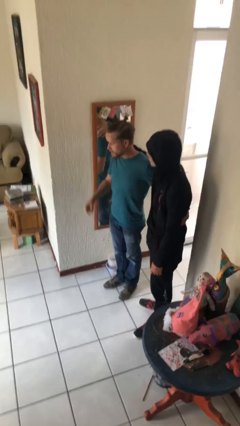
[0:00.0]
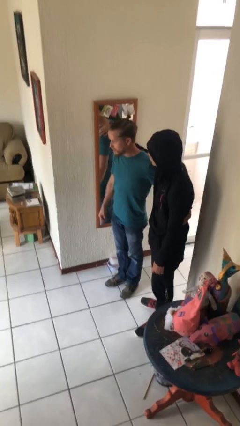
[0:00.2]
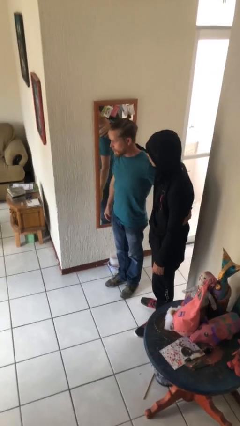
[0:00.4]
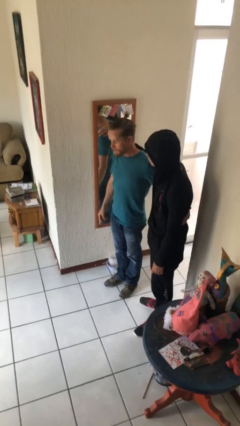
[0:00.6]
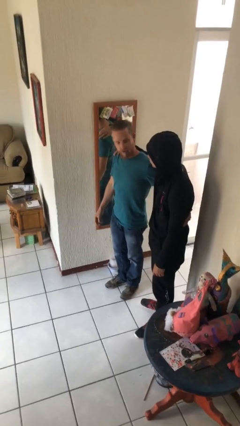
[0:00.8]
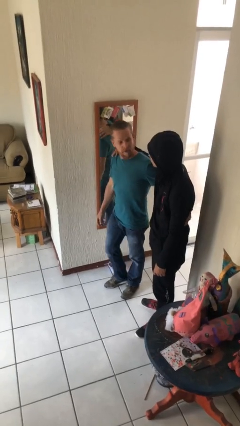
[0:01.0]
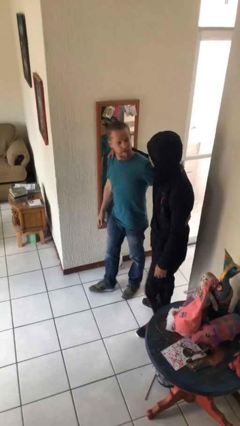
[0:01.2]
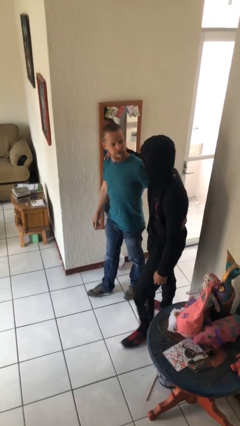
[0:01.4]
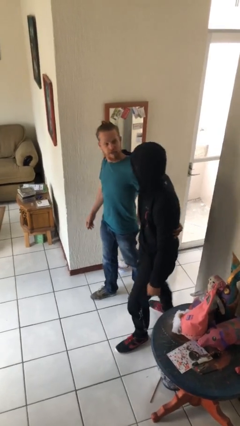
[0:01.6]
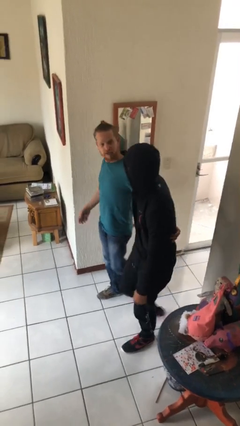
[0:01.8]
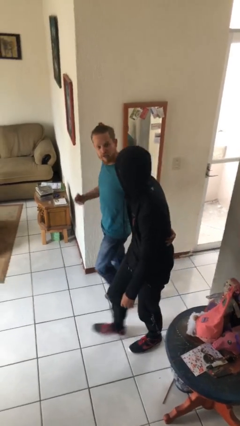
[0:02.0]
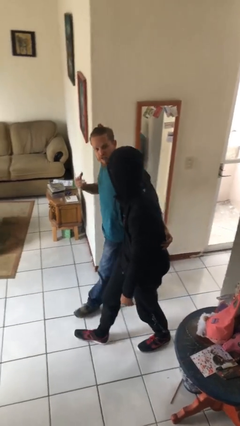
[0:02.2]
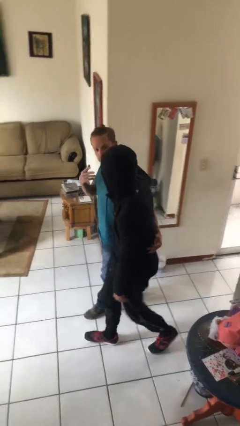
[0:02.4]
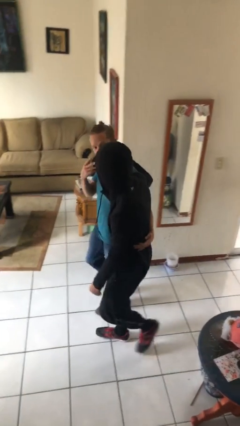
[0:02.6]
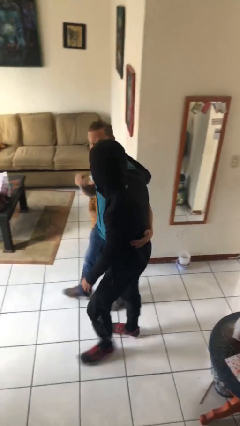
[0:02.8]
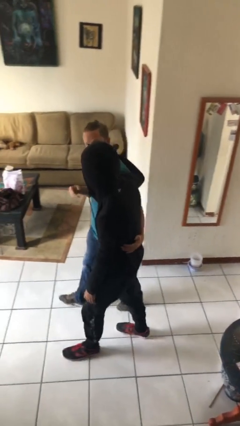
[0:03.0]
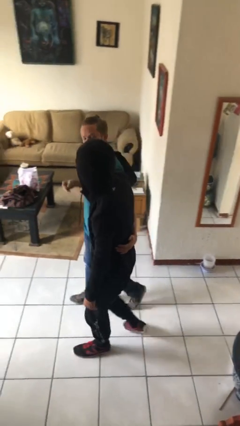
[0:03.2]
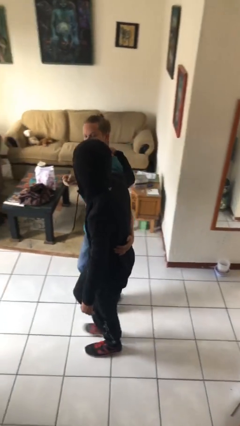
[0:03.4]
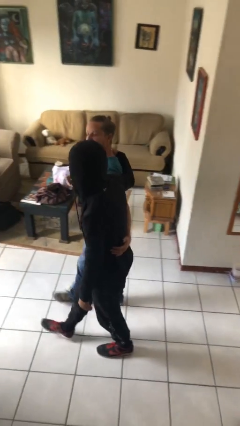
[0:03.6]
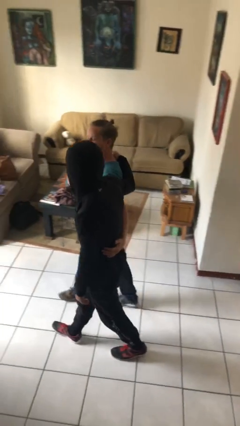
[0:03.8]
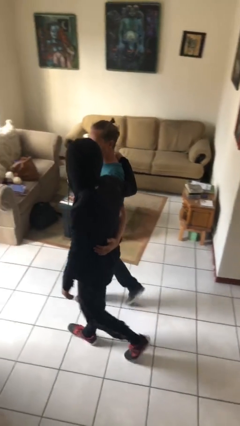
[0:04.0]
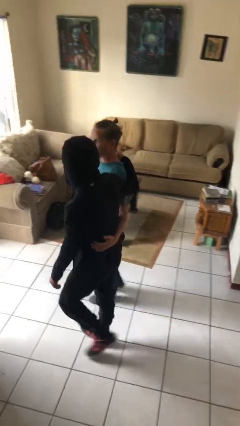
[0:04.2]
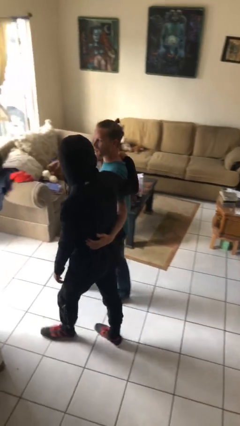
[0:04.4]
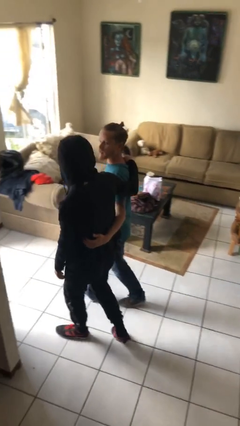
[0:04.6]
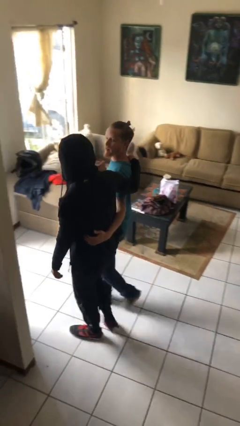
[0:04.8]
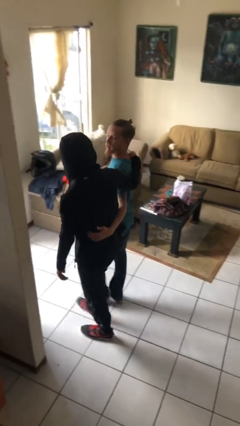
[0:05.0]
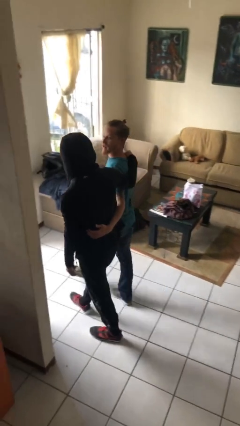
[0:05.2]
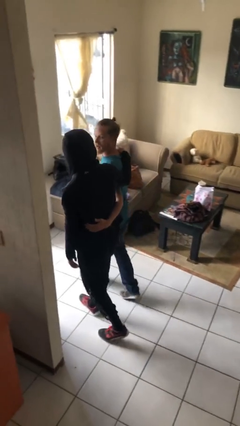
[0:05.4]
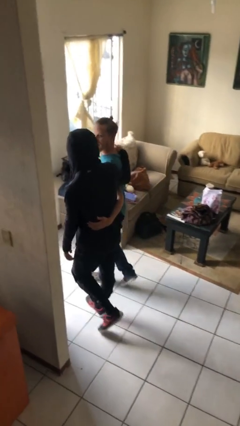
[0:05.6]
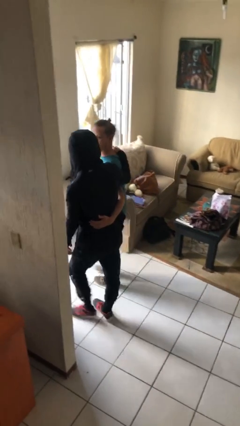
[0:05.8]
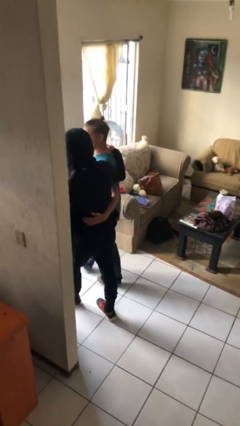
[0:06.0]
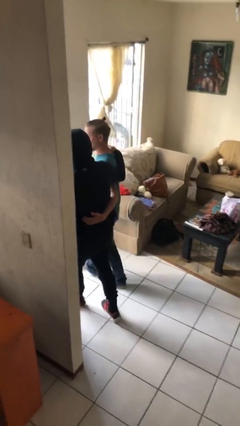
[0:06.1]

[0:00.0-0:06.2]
person talks to person

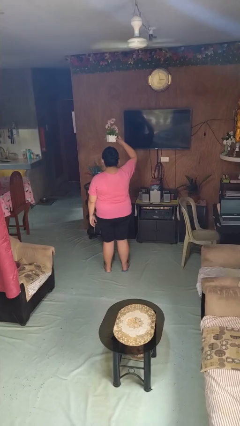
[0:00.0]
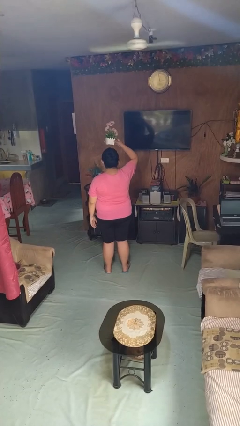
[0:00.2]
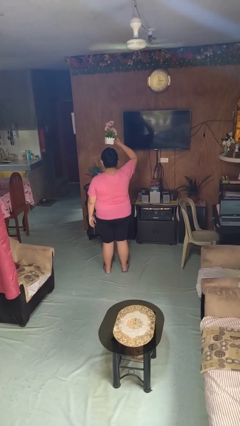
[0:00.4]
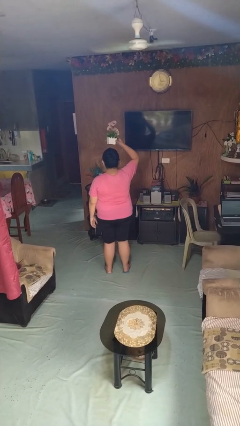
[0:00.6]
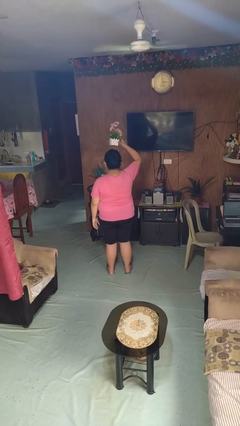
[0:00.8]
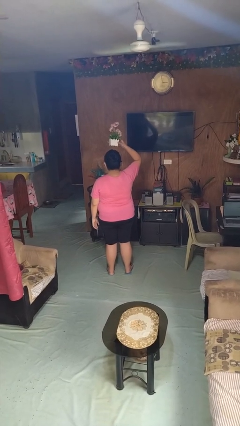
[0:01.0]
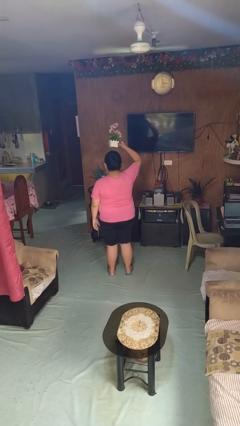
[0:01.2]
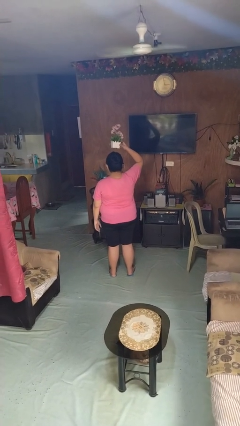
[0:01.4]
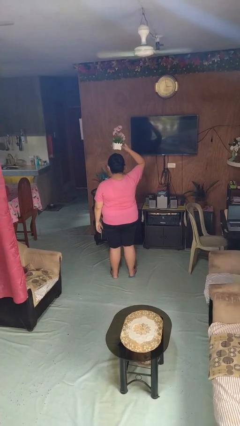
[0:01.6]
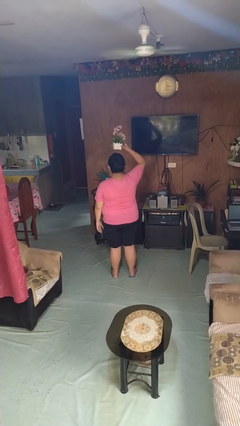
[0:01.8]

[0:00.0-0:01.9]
person holds object above head

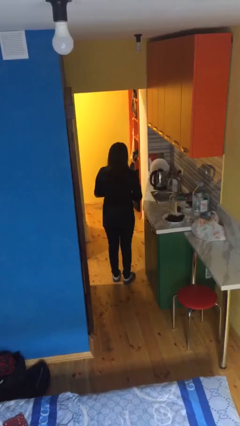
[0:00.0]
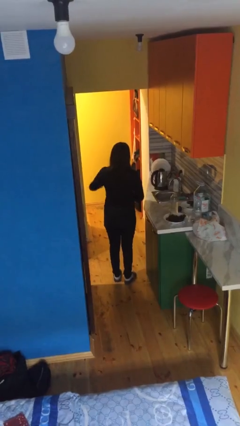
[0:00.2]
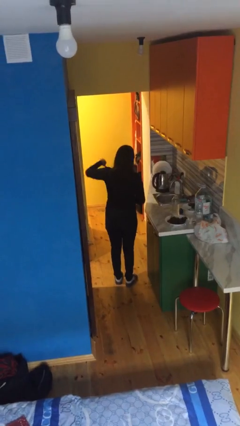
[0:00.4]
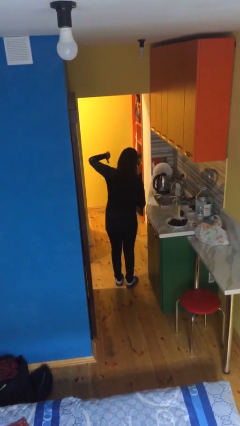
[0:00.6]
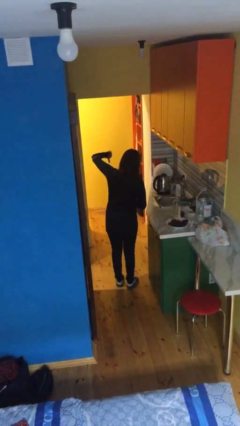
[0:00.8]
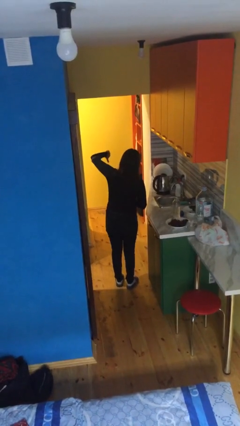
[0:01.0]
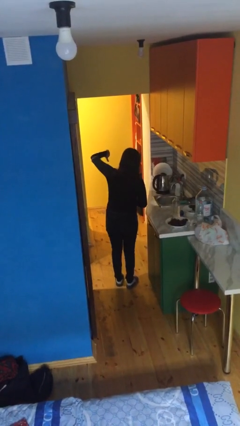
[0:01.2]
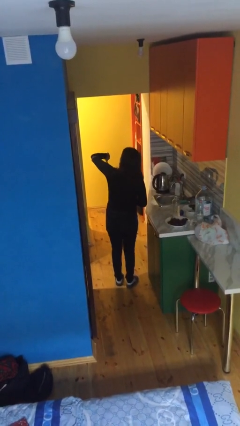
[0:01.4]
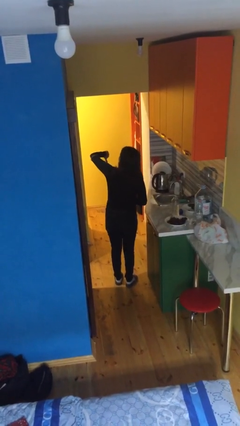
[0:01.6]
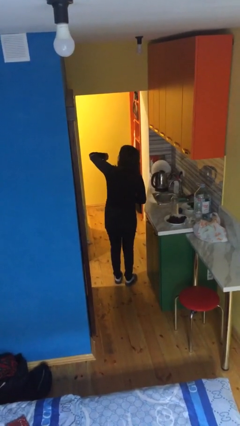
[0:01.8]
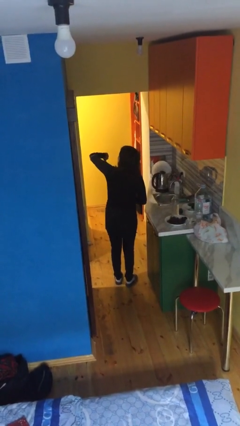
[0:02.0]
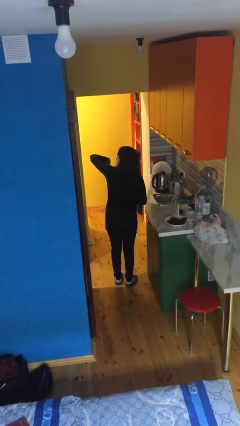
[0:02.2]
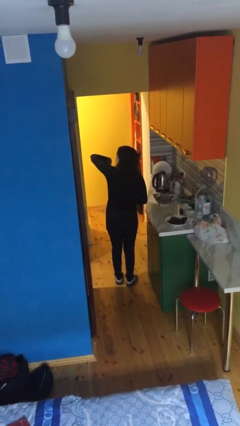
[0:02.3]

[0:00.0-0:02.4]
person gestures thumbs down

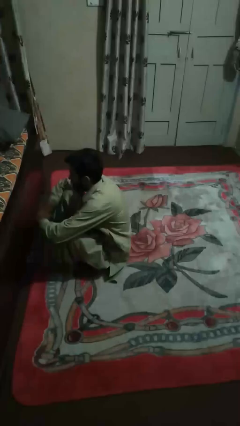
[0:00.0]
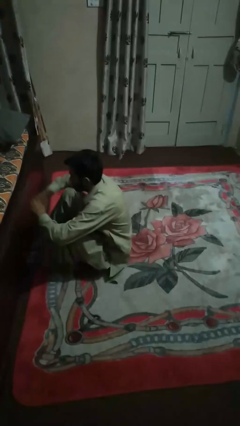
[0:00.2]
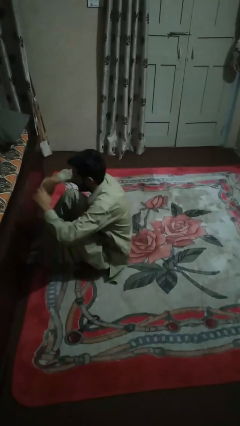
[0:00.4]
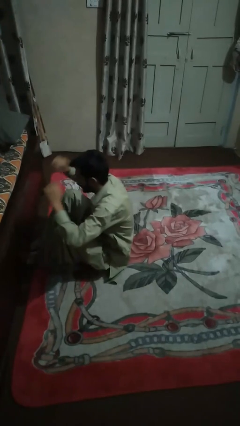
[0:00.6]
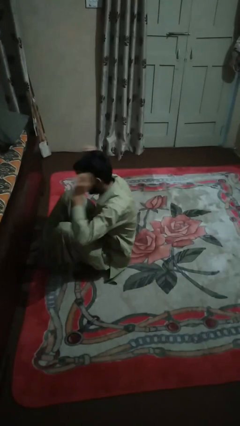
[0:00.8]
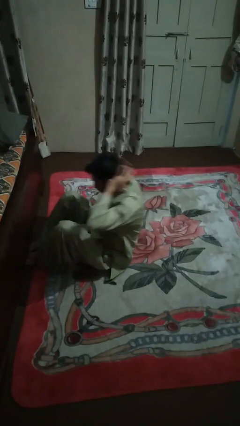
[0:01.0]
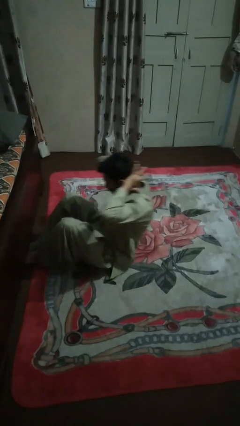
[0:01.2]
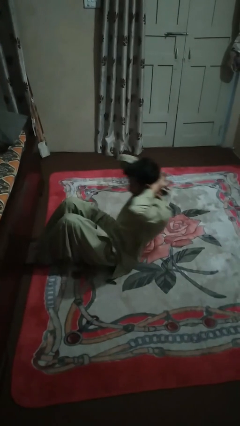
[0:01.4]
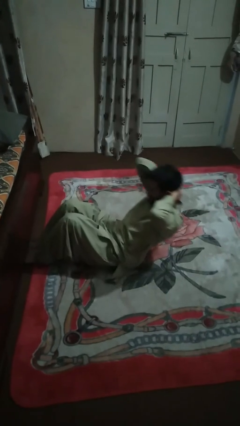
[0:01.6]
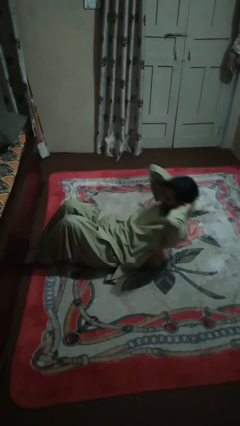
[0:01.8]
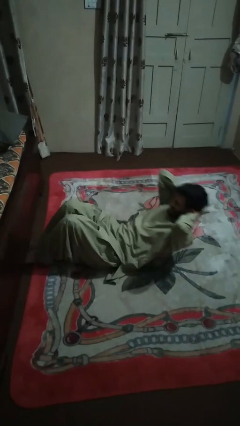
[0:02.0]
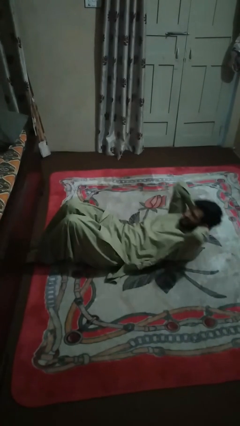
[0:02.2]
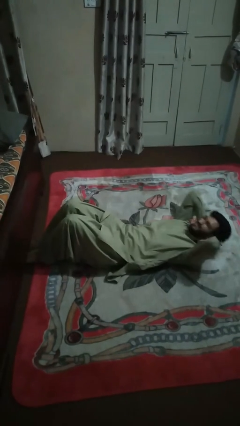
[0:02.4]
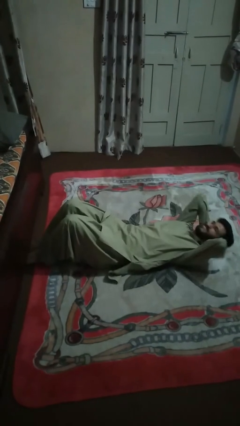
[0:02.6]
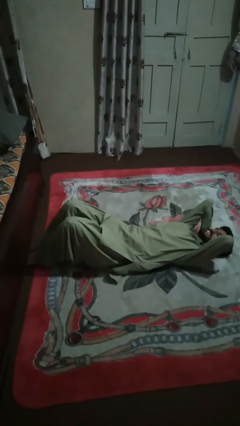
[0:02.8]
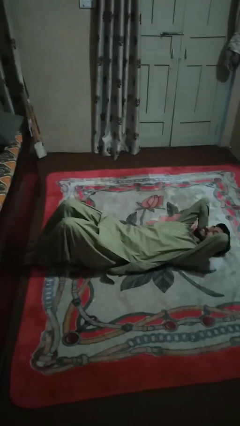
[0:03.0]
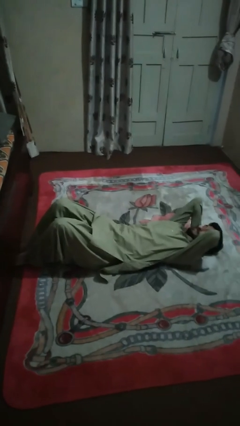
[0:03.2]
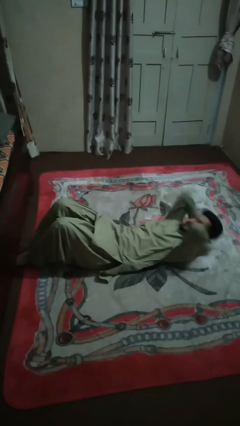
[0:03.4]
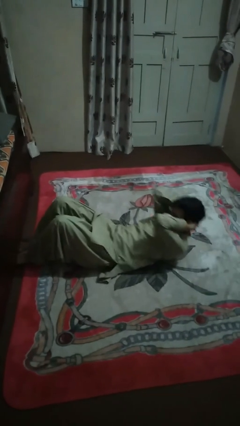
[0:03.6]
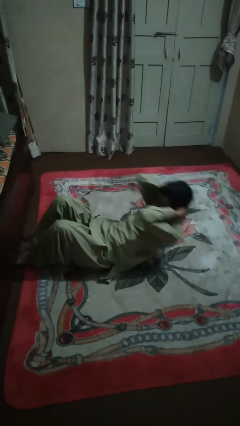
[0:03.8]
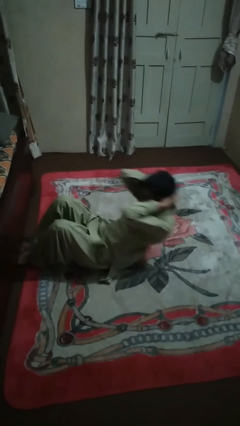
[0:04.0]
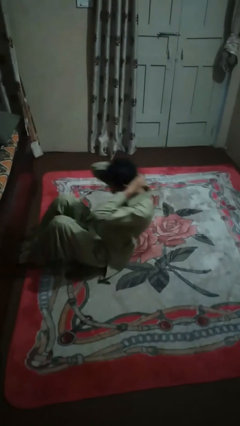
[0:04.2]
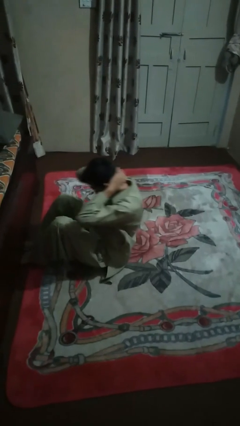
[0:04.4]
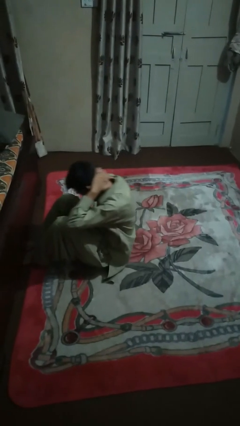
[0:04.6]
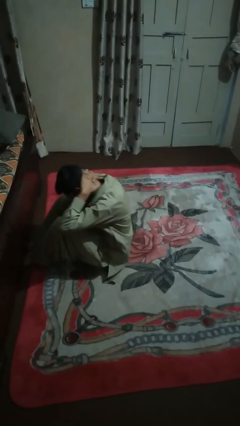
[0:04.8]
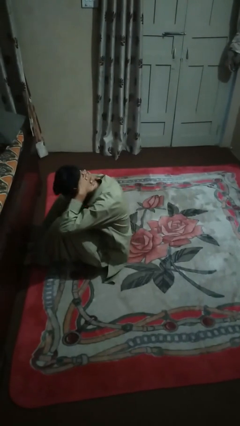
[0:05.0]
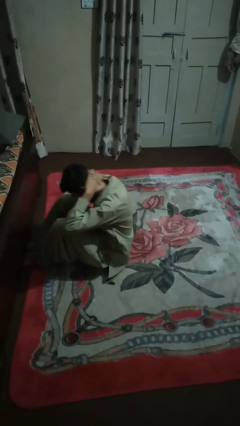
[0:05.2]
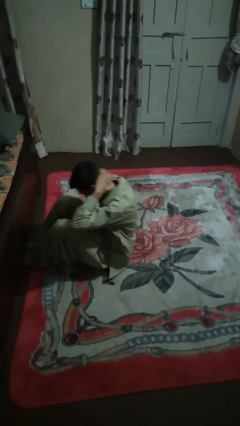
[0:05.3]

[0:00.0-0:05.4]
person exercises with situp

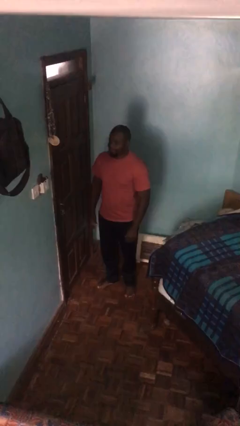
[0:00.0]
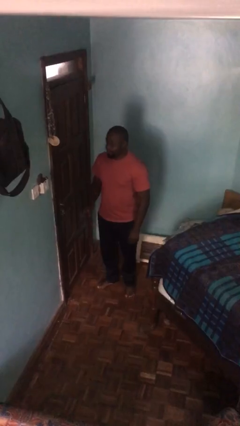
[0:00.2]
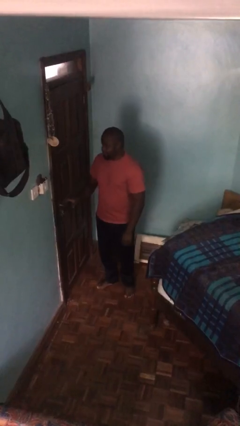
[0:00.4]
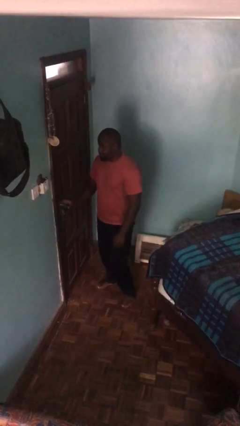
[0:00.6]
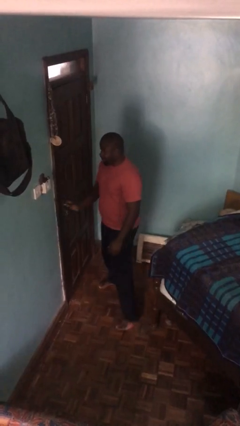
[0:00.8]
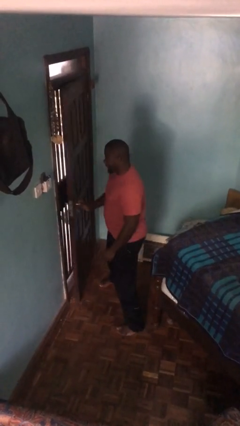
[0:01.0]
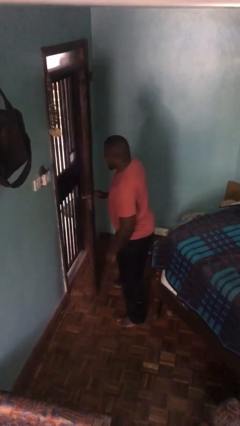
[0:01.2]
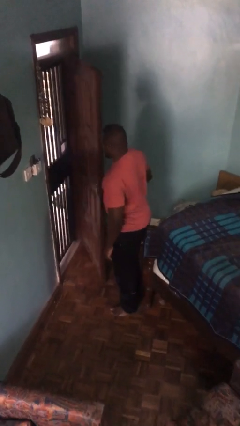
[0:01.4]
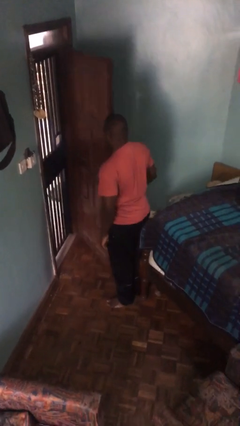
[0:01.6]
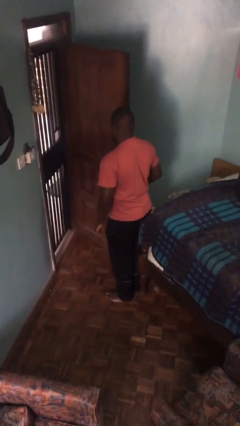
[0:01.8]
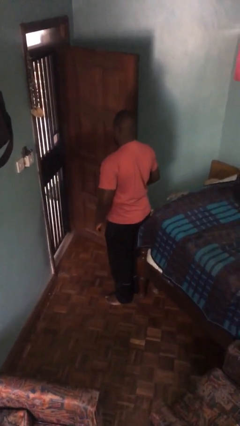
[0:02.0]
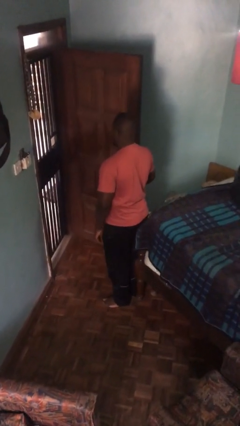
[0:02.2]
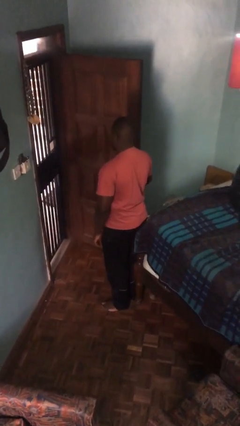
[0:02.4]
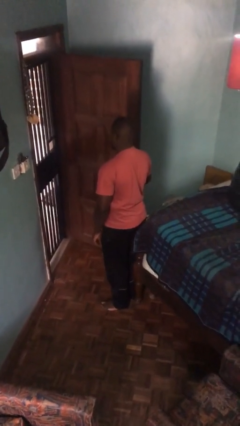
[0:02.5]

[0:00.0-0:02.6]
person opens facility door
